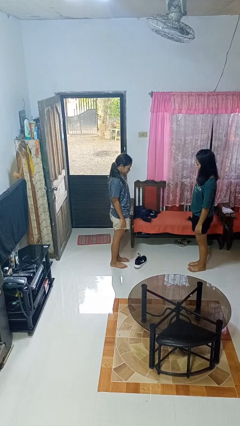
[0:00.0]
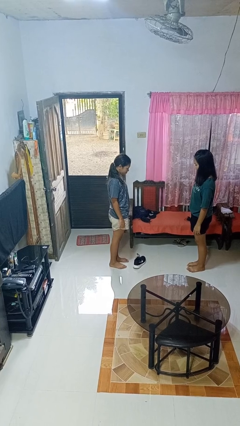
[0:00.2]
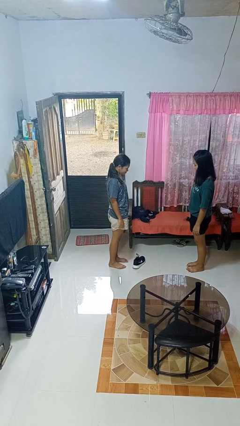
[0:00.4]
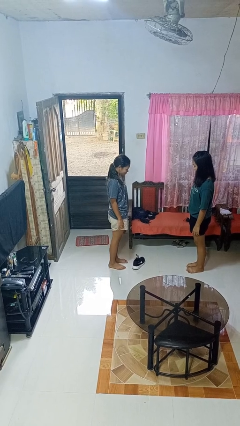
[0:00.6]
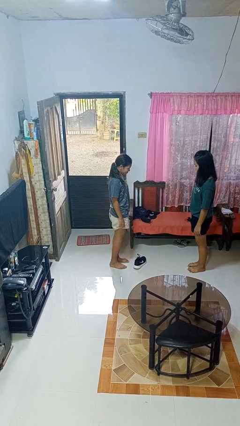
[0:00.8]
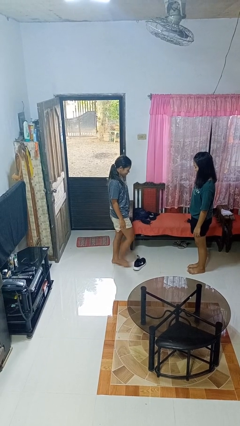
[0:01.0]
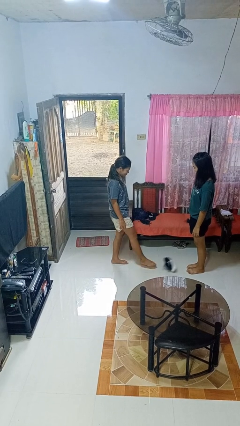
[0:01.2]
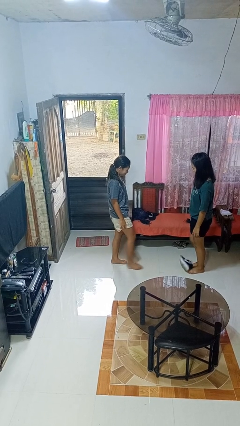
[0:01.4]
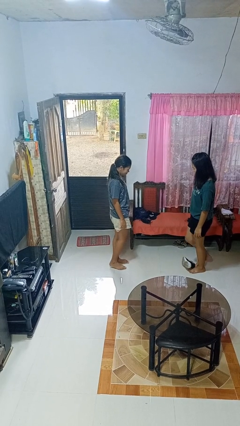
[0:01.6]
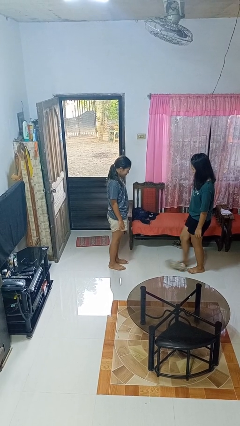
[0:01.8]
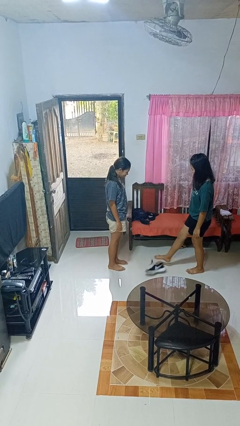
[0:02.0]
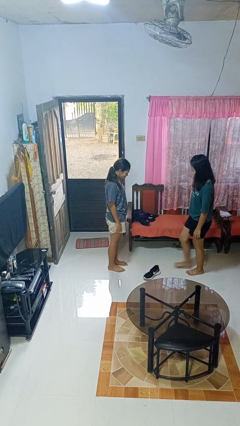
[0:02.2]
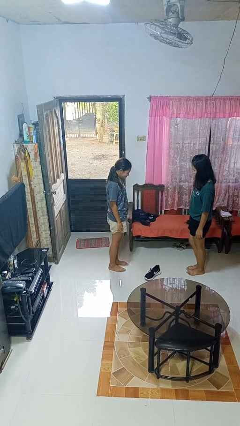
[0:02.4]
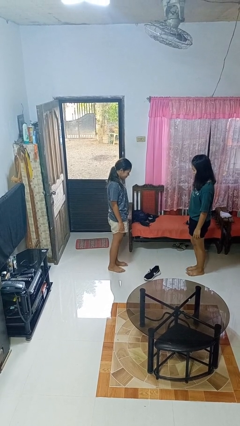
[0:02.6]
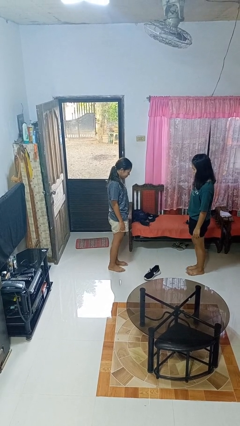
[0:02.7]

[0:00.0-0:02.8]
person kicks object to person

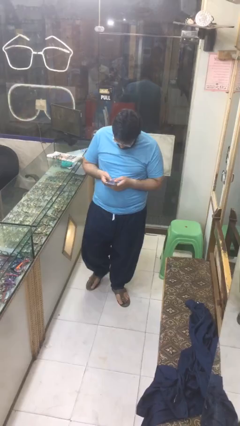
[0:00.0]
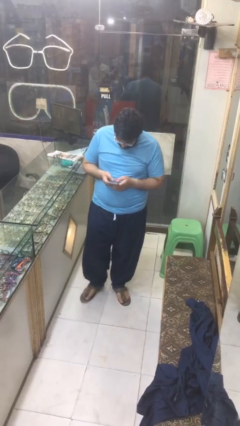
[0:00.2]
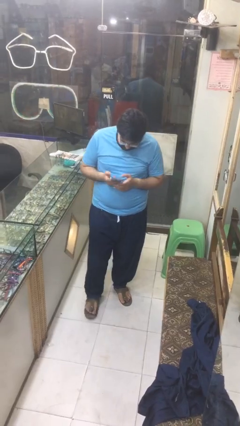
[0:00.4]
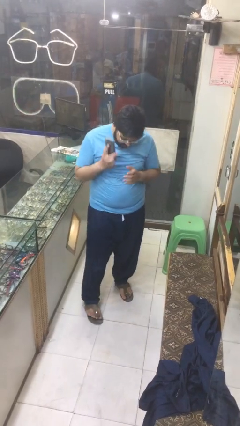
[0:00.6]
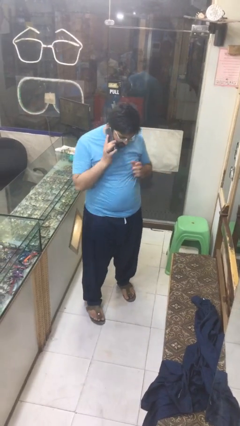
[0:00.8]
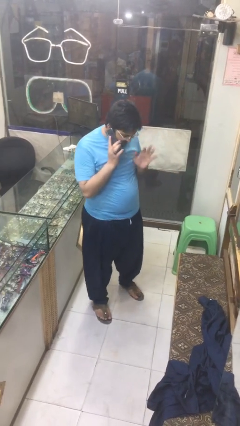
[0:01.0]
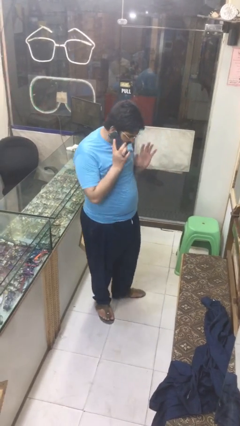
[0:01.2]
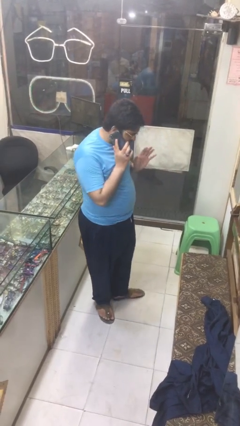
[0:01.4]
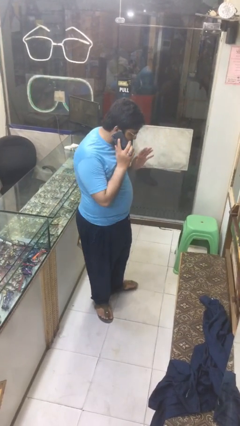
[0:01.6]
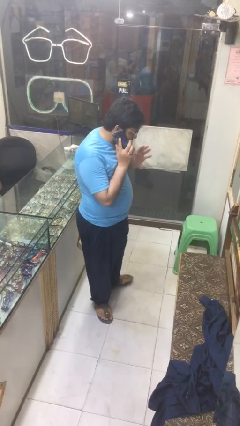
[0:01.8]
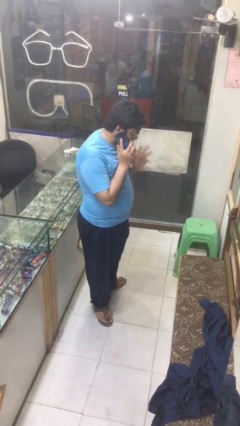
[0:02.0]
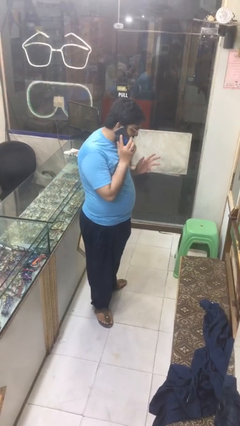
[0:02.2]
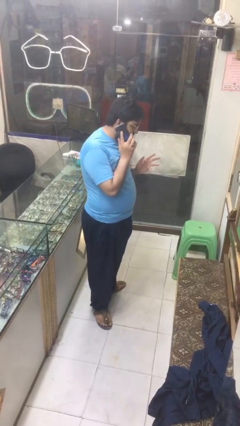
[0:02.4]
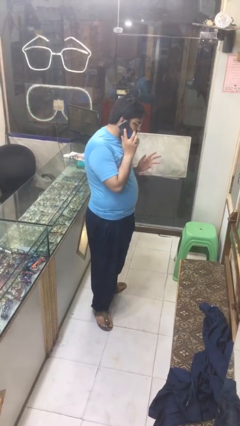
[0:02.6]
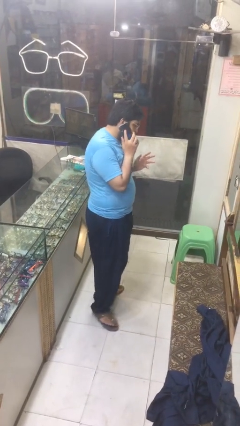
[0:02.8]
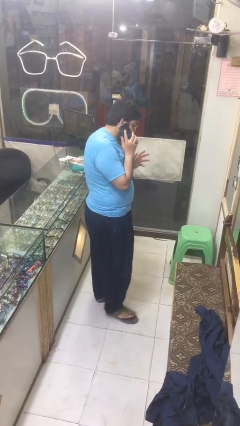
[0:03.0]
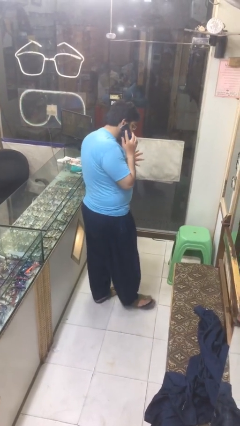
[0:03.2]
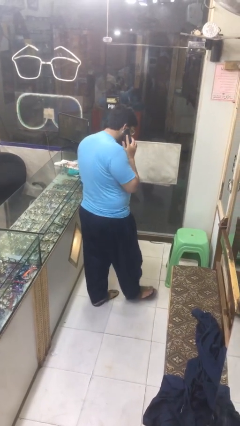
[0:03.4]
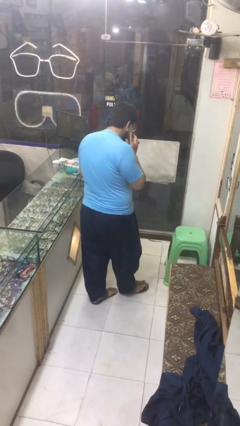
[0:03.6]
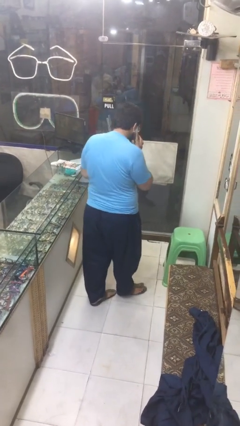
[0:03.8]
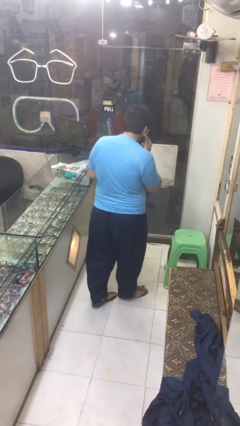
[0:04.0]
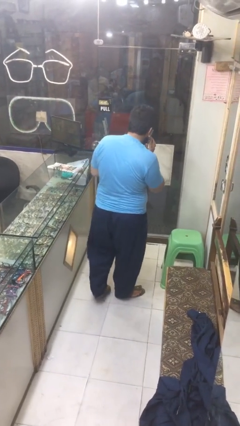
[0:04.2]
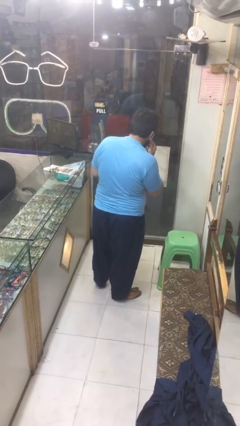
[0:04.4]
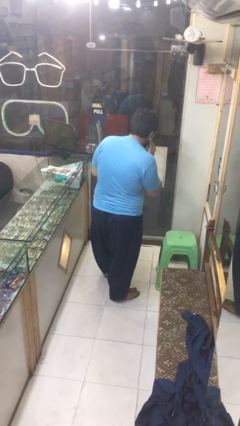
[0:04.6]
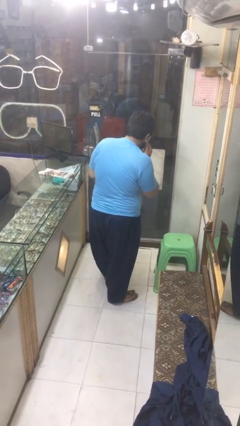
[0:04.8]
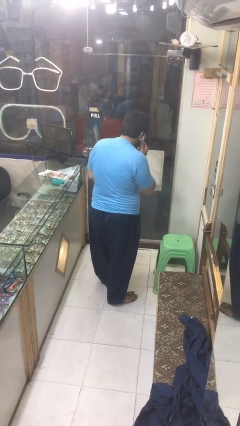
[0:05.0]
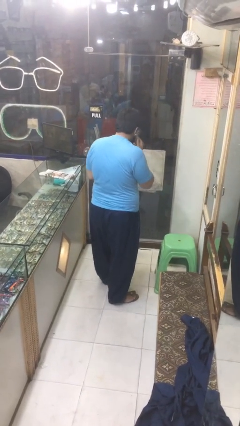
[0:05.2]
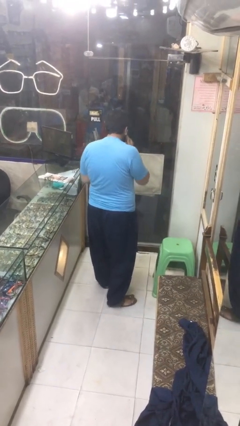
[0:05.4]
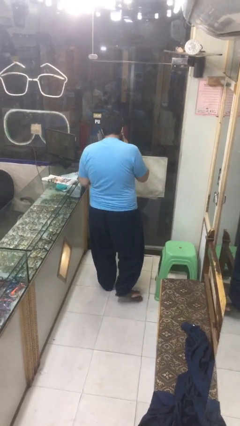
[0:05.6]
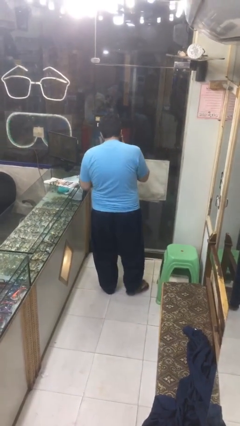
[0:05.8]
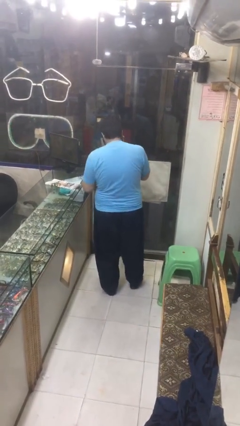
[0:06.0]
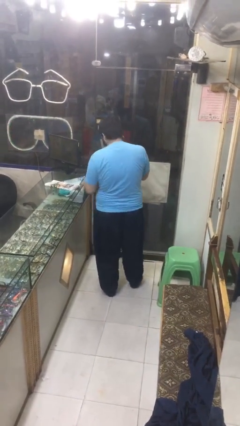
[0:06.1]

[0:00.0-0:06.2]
person talks on phone

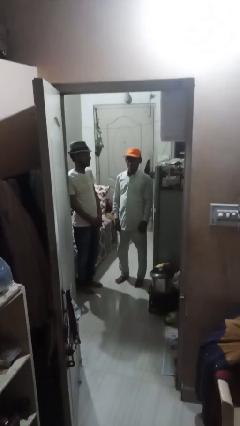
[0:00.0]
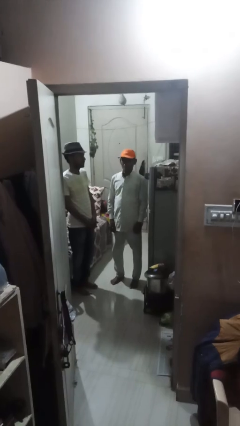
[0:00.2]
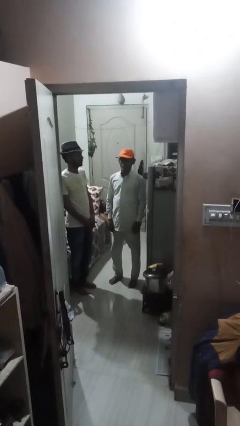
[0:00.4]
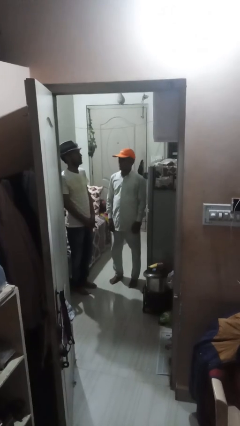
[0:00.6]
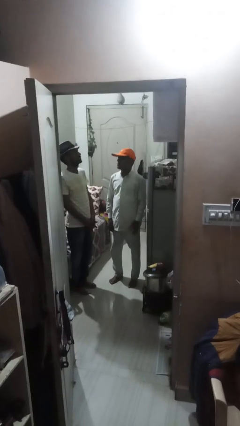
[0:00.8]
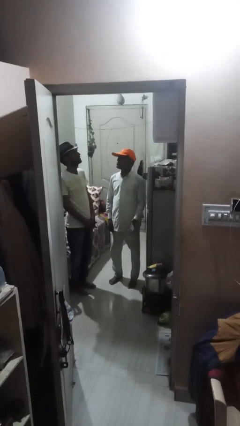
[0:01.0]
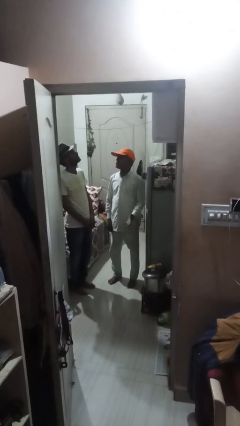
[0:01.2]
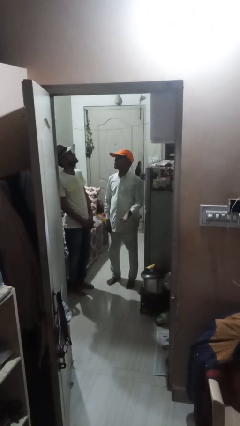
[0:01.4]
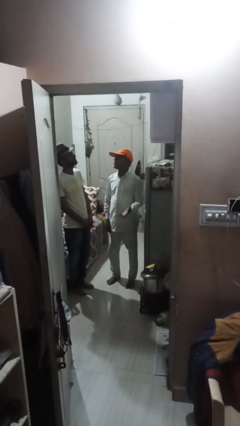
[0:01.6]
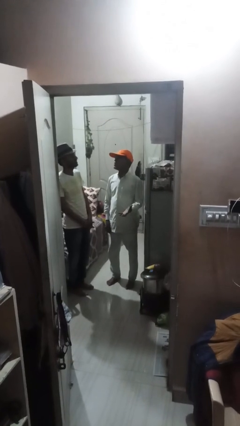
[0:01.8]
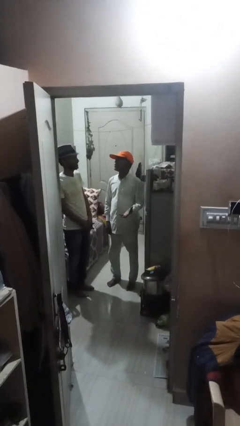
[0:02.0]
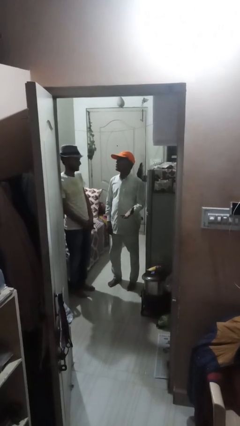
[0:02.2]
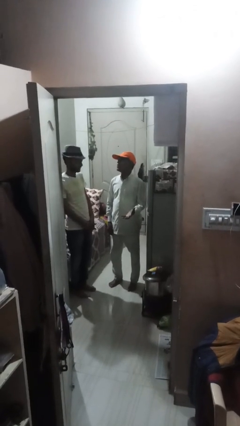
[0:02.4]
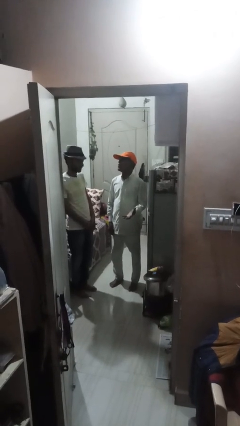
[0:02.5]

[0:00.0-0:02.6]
person laughs with person

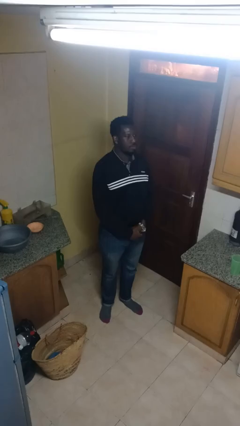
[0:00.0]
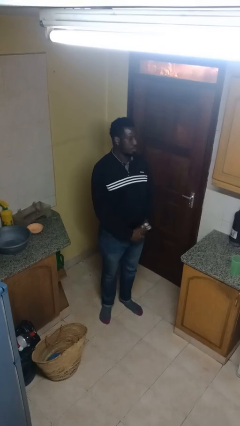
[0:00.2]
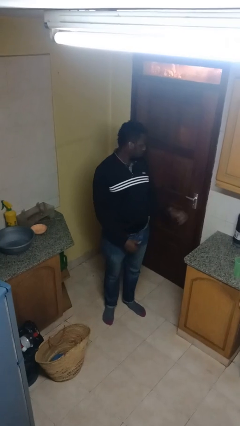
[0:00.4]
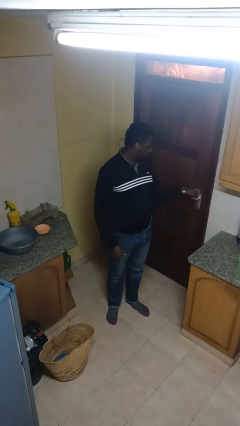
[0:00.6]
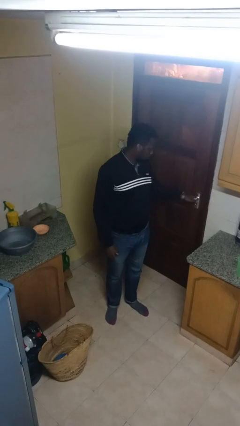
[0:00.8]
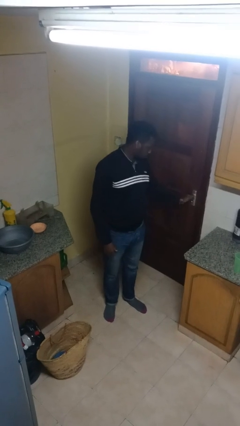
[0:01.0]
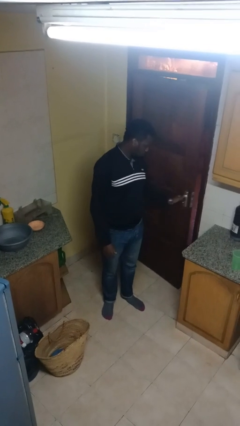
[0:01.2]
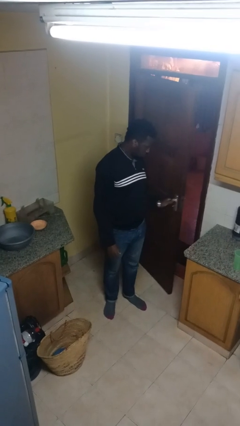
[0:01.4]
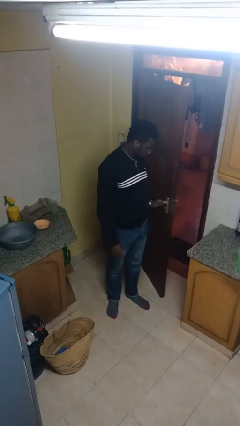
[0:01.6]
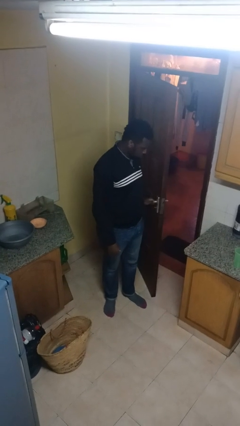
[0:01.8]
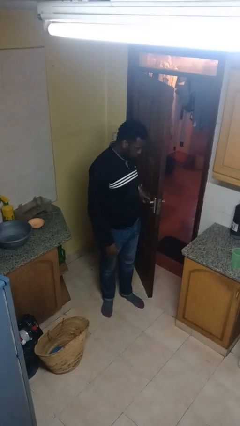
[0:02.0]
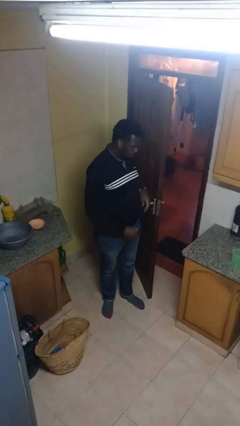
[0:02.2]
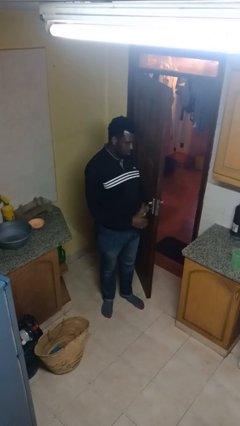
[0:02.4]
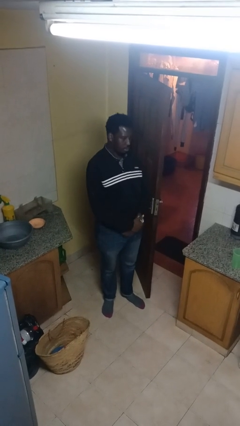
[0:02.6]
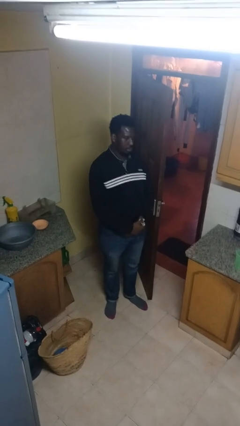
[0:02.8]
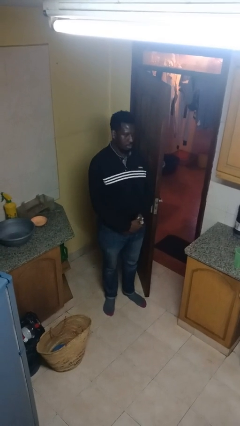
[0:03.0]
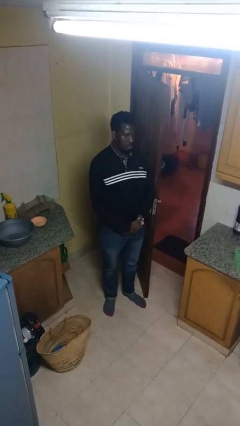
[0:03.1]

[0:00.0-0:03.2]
person opens facility door

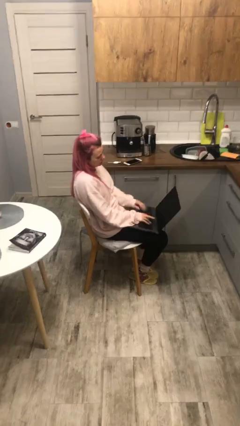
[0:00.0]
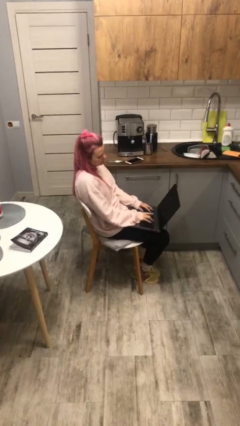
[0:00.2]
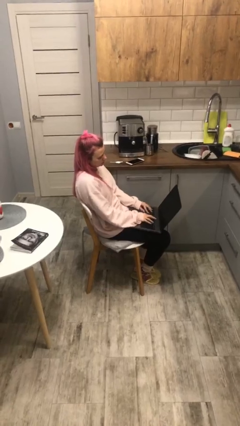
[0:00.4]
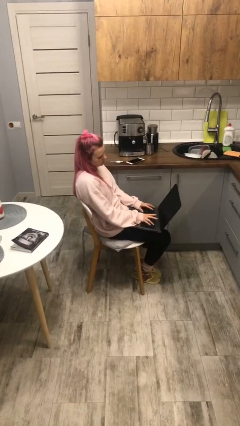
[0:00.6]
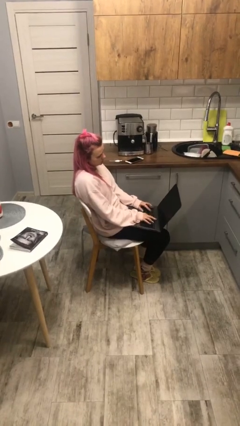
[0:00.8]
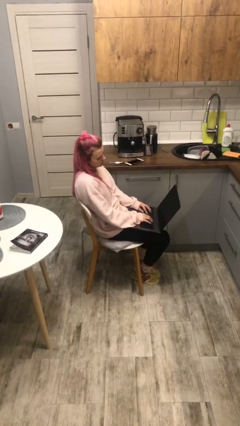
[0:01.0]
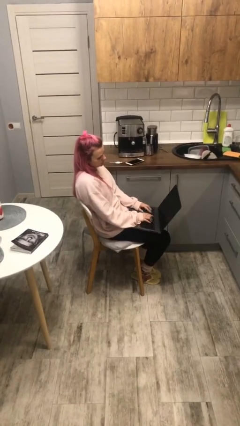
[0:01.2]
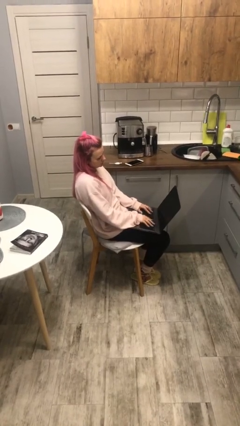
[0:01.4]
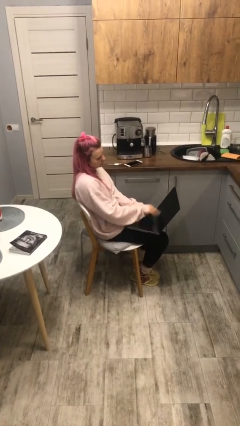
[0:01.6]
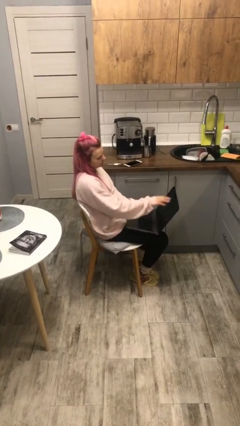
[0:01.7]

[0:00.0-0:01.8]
person interacts with laptop

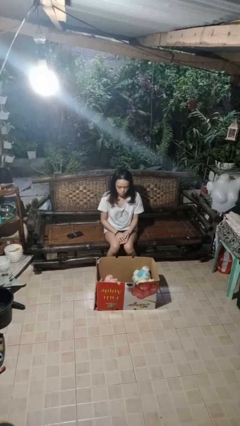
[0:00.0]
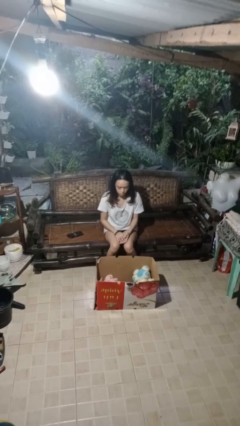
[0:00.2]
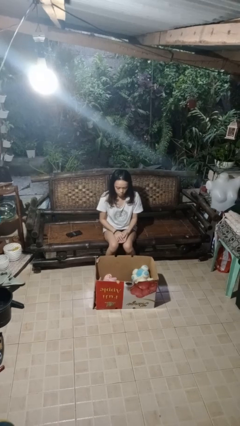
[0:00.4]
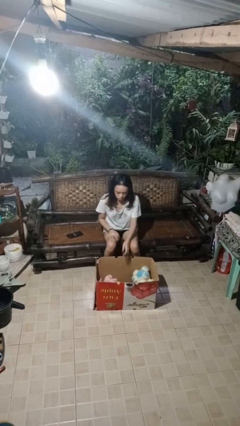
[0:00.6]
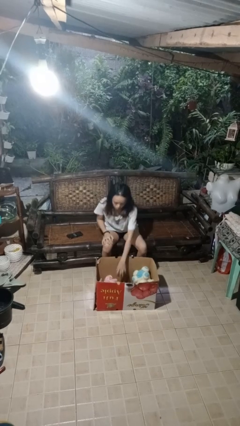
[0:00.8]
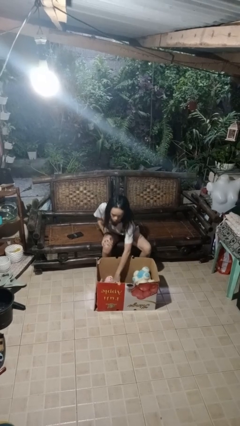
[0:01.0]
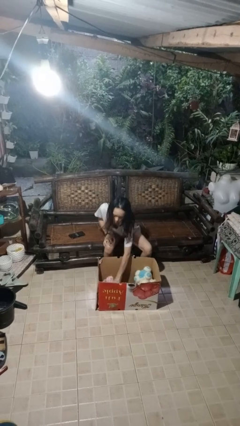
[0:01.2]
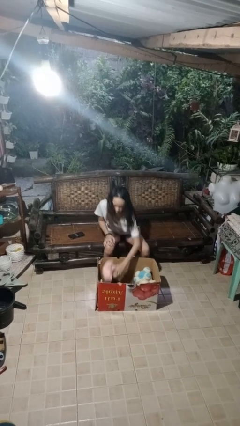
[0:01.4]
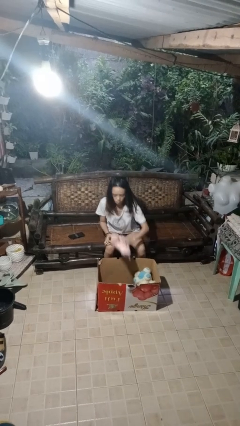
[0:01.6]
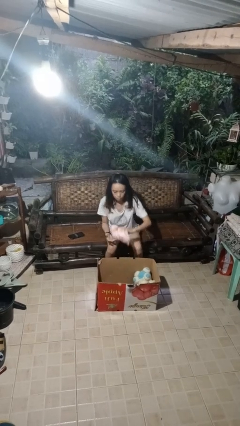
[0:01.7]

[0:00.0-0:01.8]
person takes object from box
